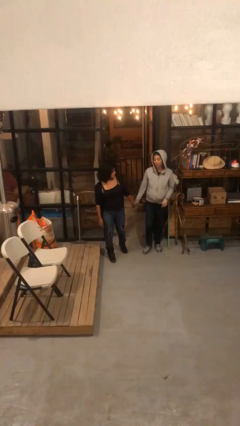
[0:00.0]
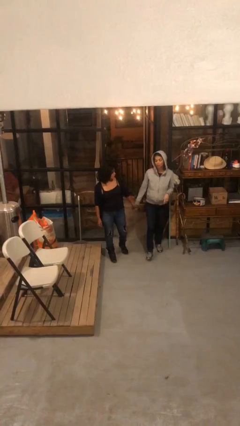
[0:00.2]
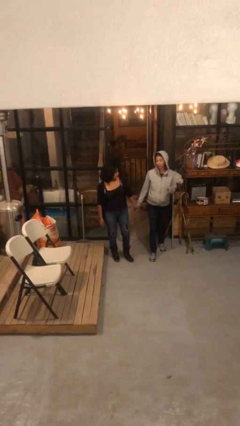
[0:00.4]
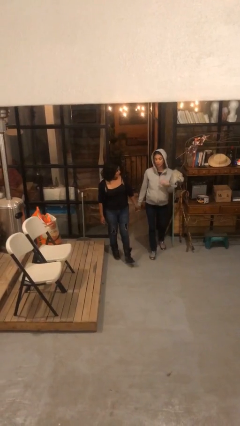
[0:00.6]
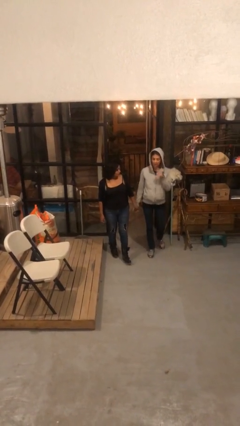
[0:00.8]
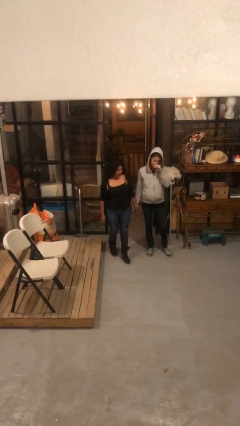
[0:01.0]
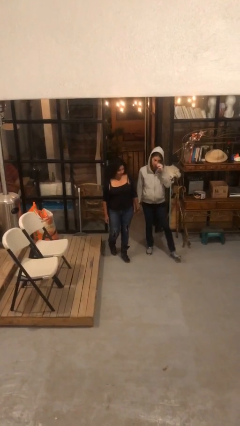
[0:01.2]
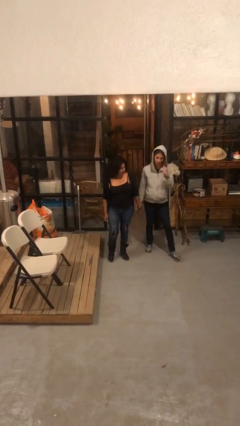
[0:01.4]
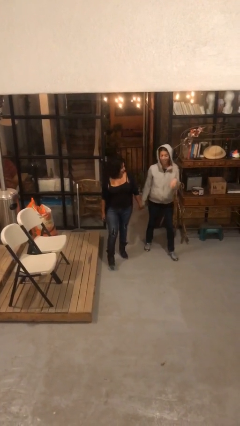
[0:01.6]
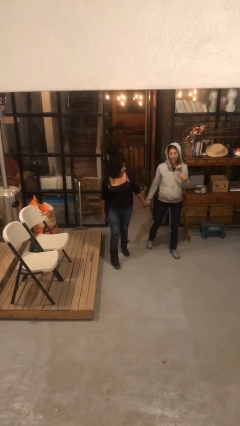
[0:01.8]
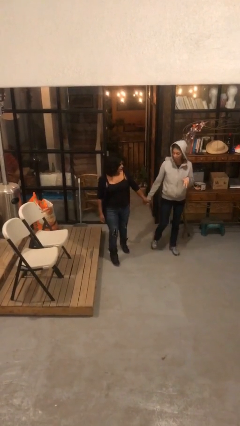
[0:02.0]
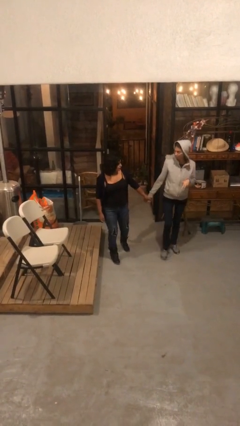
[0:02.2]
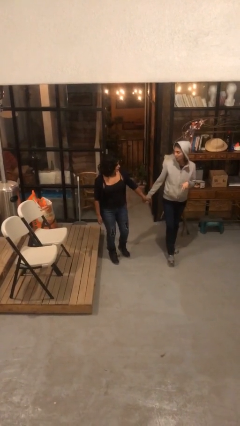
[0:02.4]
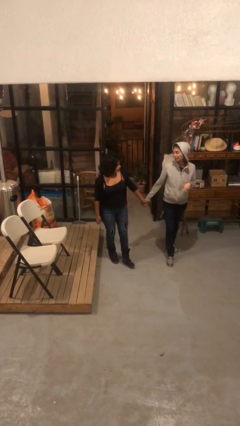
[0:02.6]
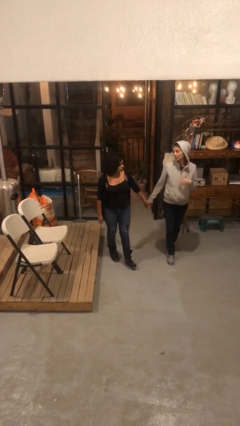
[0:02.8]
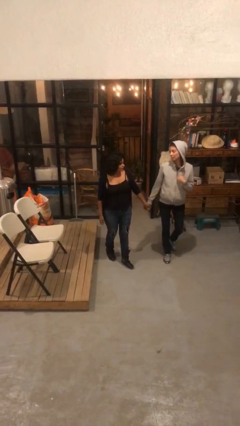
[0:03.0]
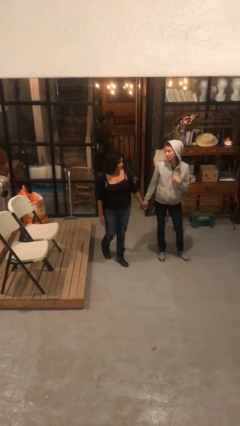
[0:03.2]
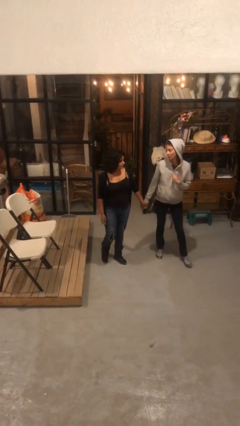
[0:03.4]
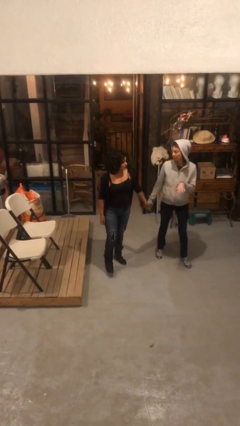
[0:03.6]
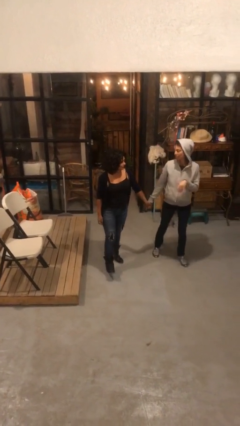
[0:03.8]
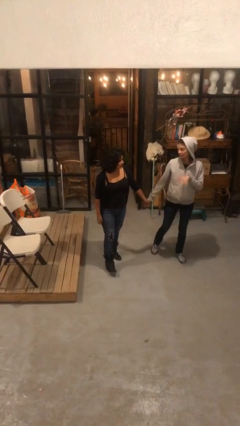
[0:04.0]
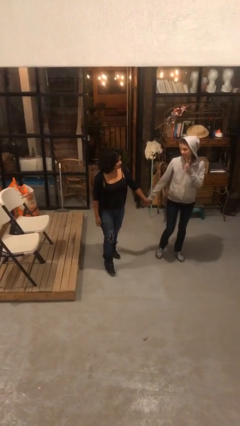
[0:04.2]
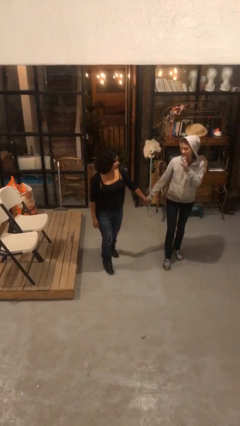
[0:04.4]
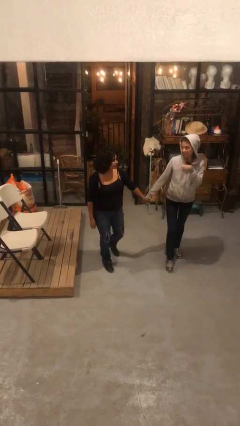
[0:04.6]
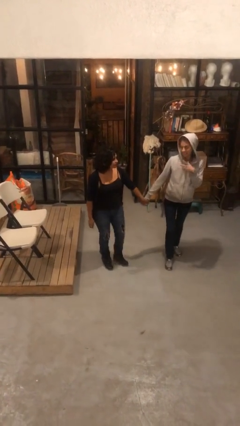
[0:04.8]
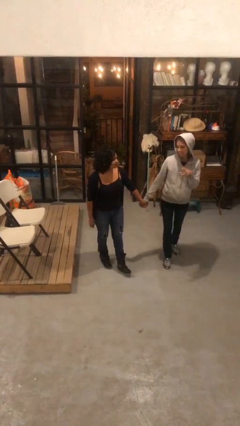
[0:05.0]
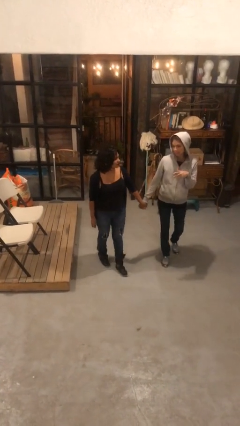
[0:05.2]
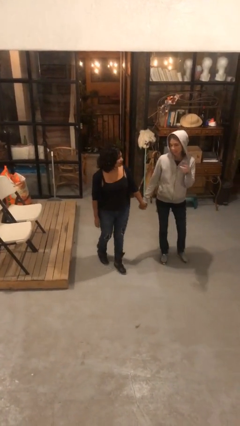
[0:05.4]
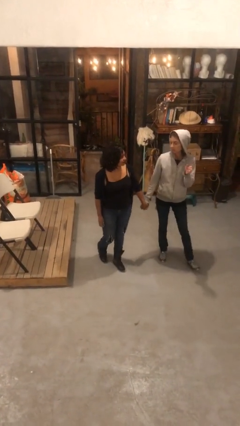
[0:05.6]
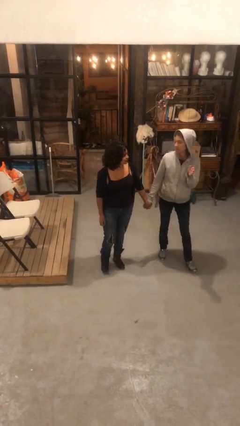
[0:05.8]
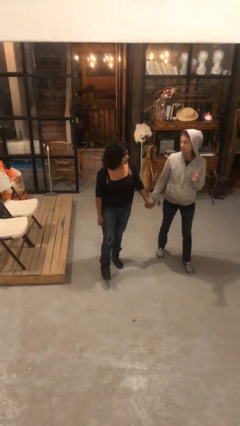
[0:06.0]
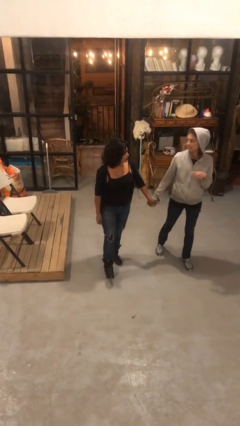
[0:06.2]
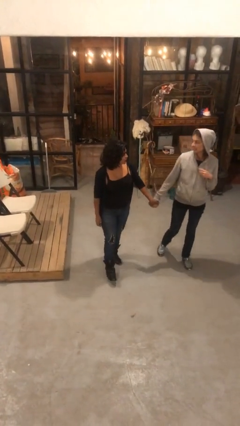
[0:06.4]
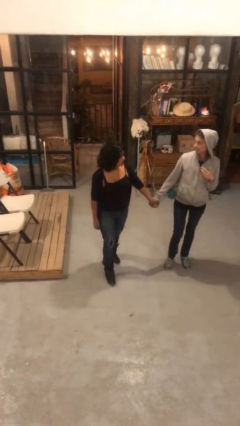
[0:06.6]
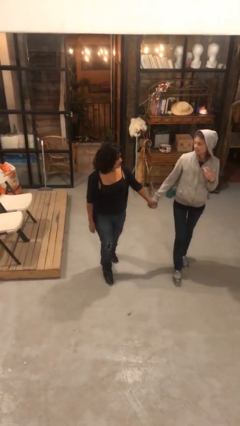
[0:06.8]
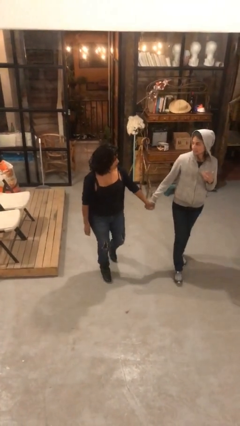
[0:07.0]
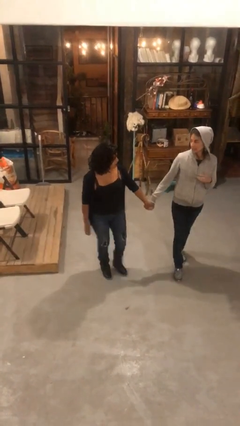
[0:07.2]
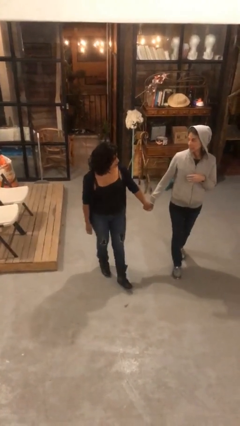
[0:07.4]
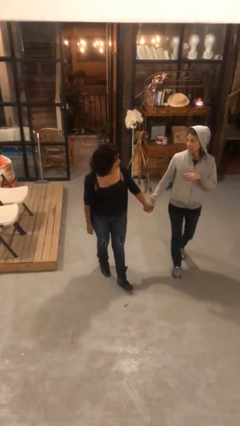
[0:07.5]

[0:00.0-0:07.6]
person holds hand

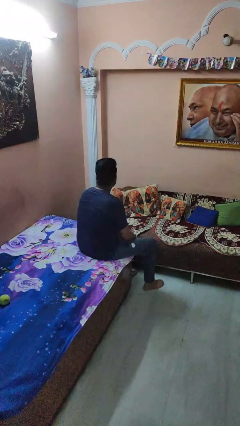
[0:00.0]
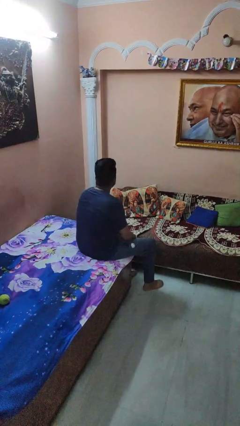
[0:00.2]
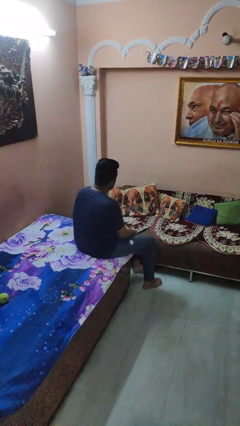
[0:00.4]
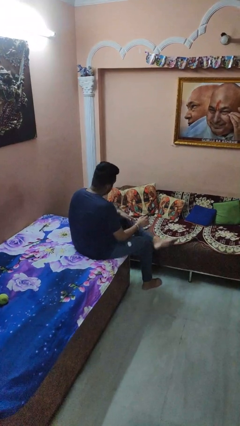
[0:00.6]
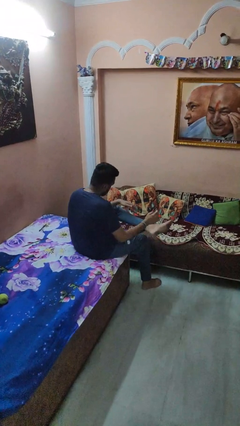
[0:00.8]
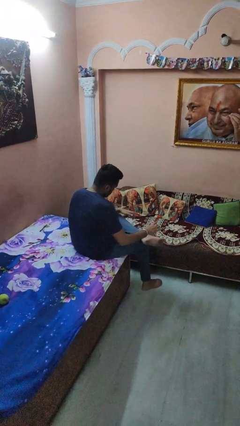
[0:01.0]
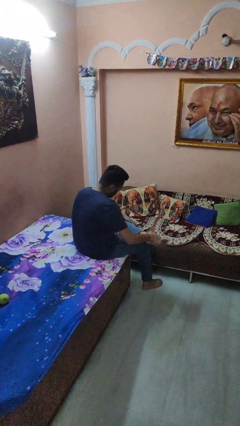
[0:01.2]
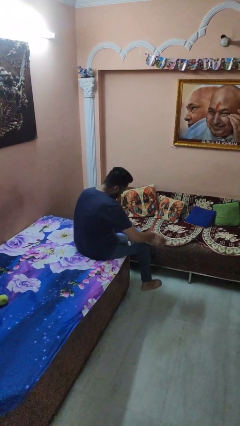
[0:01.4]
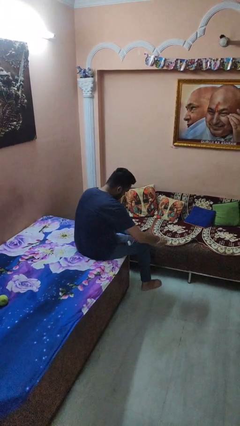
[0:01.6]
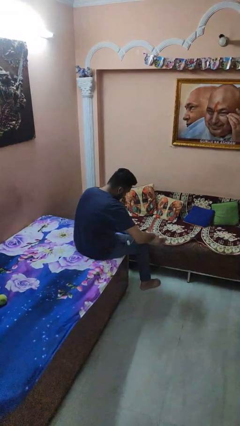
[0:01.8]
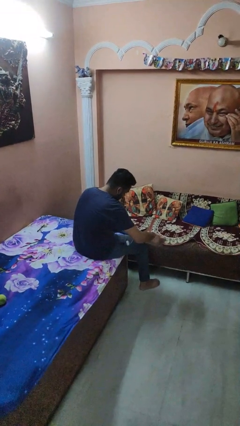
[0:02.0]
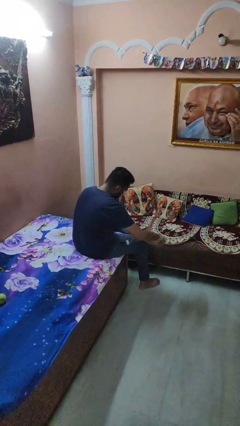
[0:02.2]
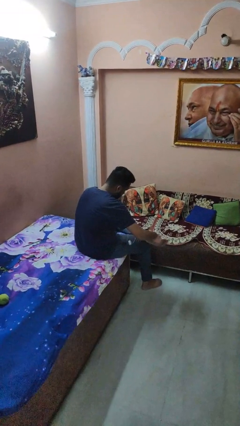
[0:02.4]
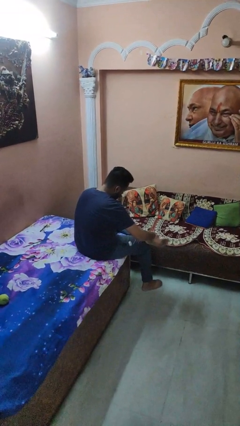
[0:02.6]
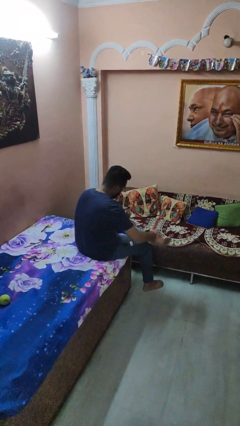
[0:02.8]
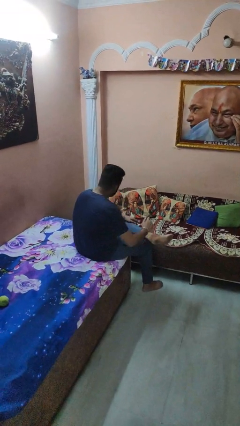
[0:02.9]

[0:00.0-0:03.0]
person rubs foot

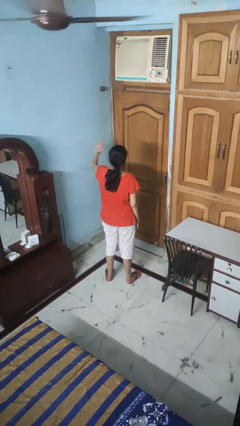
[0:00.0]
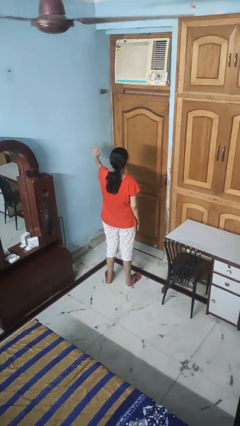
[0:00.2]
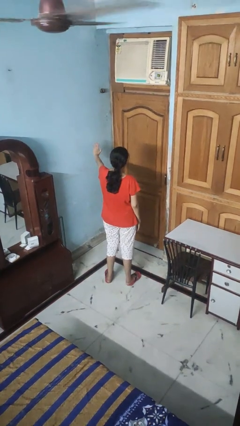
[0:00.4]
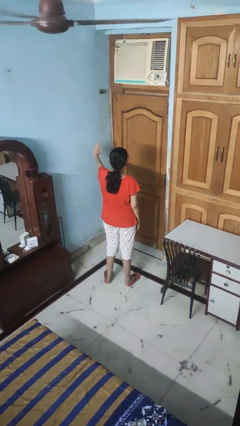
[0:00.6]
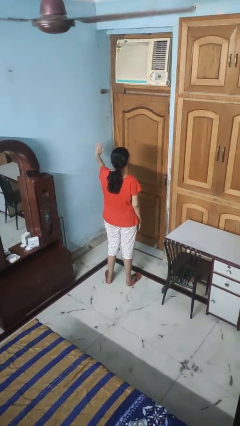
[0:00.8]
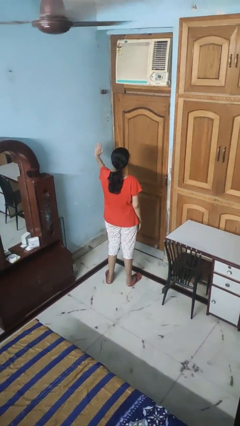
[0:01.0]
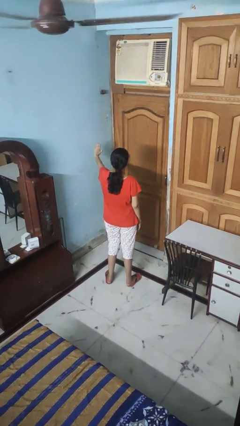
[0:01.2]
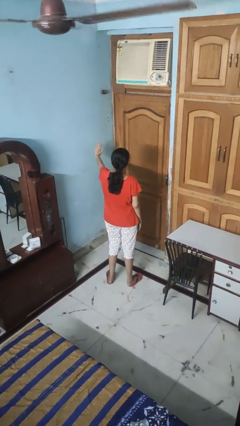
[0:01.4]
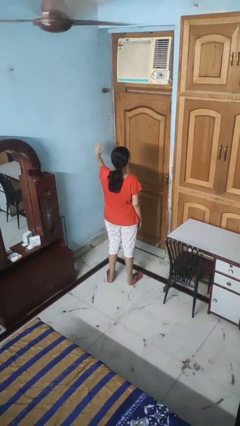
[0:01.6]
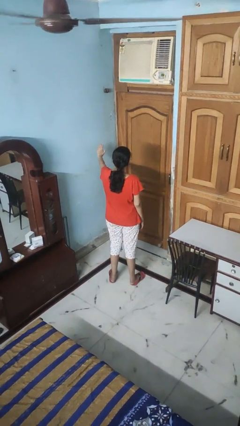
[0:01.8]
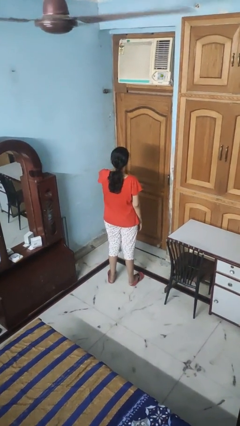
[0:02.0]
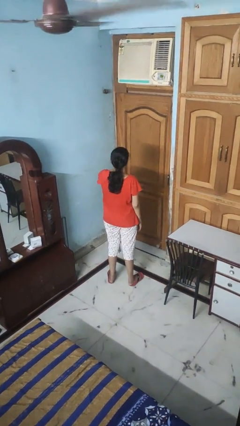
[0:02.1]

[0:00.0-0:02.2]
person gestures stop

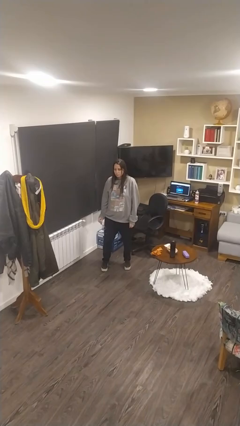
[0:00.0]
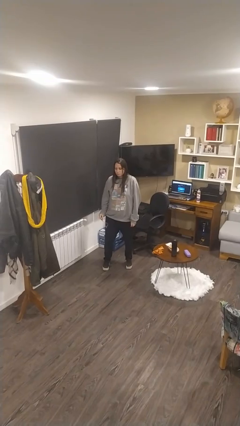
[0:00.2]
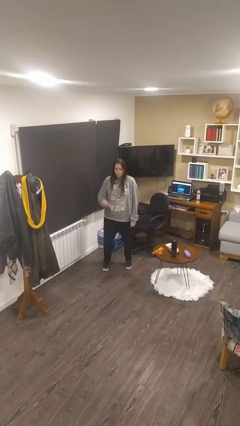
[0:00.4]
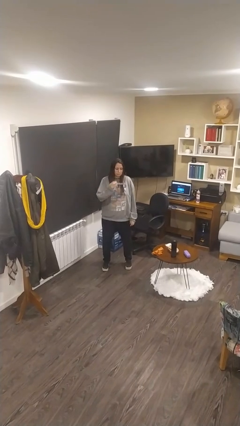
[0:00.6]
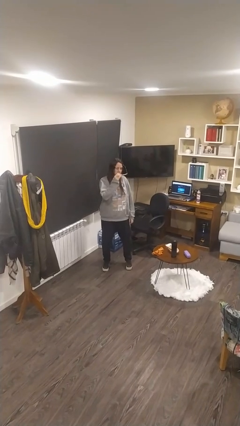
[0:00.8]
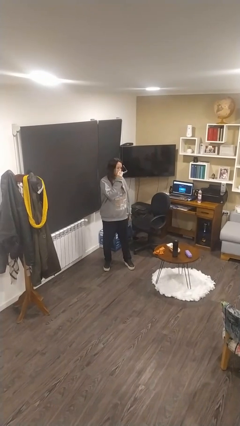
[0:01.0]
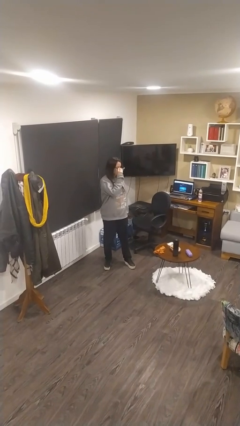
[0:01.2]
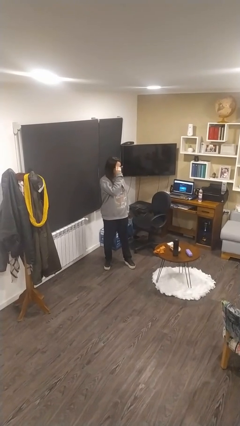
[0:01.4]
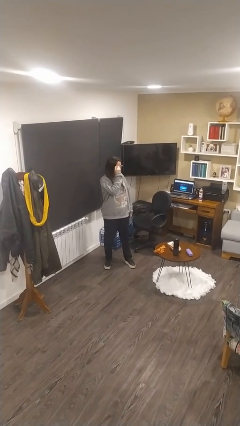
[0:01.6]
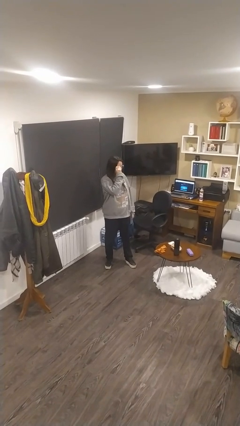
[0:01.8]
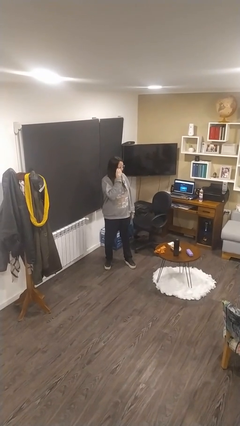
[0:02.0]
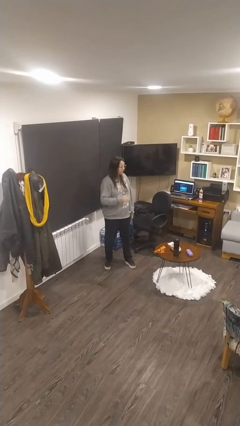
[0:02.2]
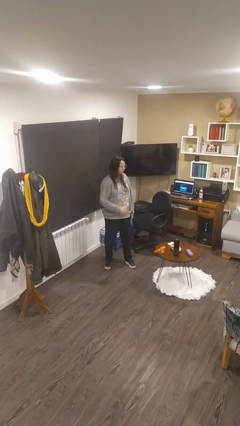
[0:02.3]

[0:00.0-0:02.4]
person puts on glasses

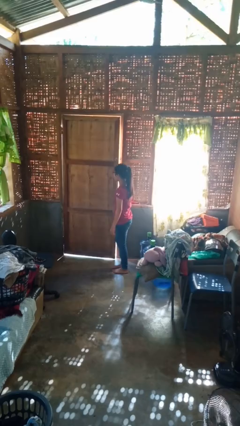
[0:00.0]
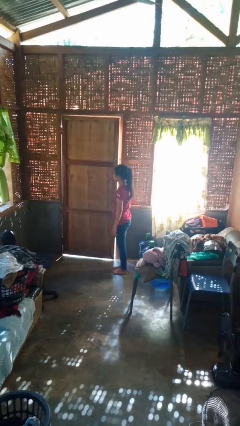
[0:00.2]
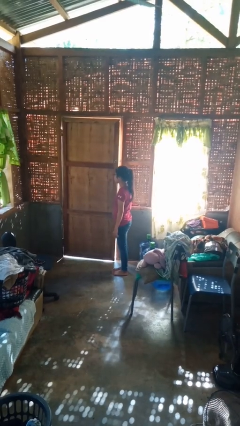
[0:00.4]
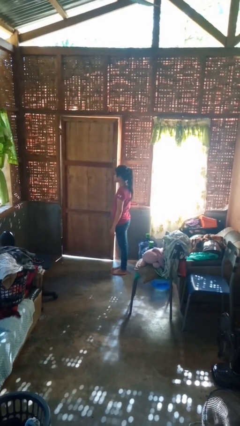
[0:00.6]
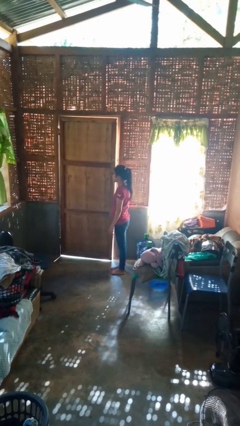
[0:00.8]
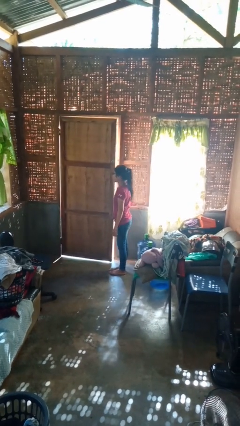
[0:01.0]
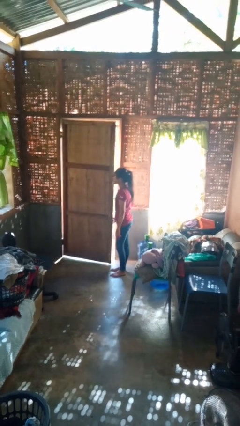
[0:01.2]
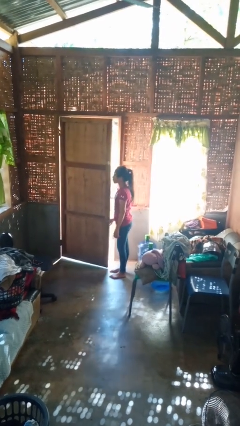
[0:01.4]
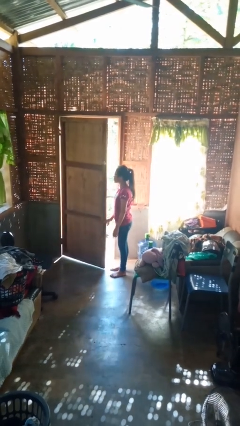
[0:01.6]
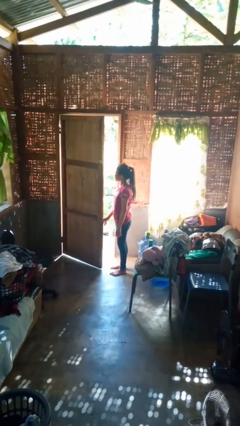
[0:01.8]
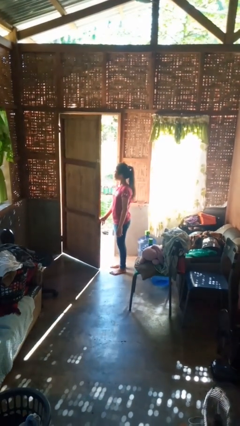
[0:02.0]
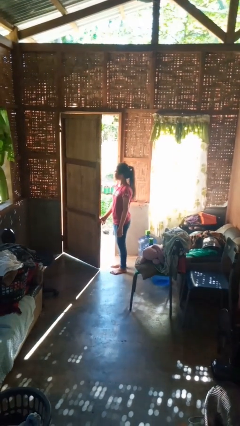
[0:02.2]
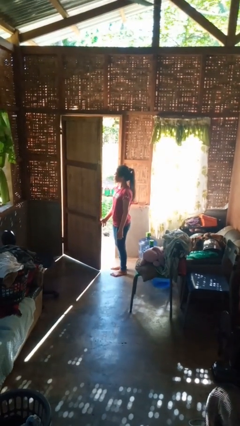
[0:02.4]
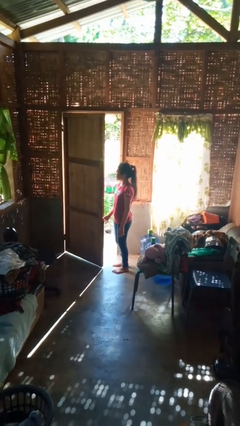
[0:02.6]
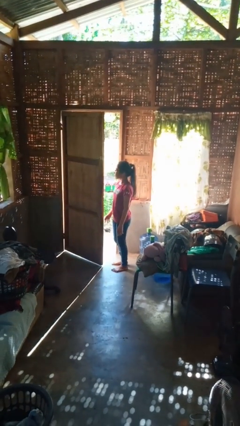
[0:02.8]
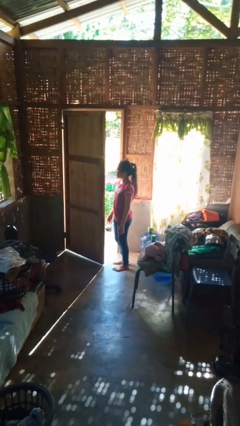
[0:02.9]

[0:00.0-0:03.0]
person opens facility door
